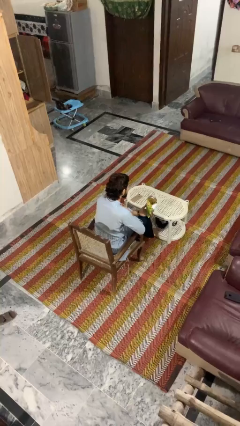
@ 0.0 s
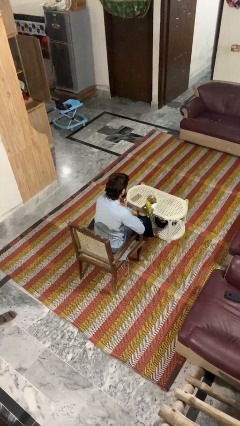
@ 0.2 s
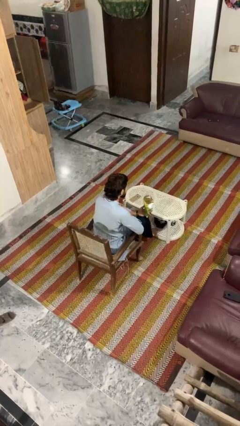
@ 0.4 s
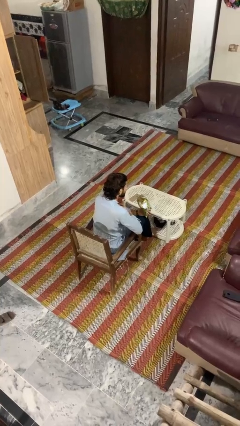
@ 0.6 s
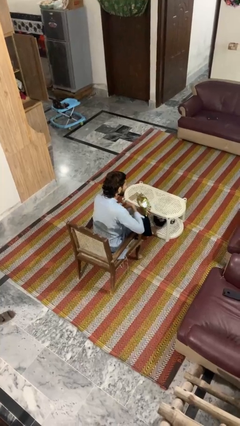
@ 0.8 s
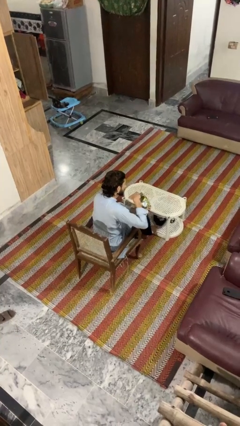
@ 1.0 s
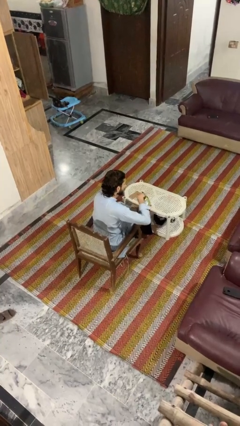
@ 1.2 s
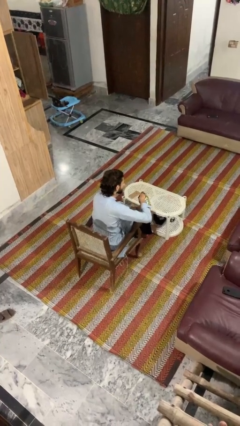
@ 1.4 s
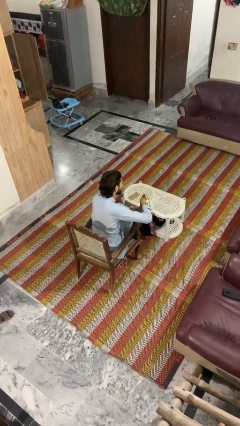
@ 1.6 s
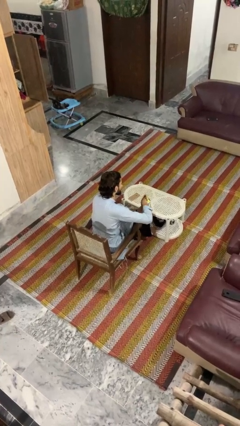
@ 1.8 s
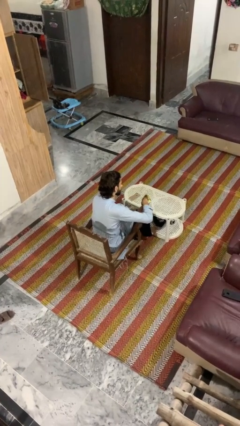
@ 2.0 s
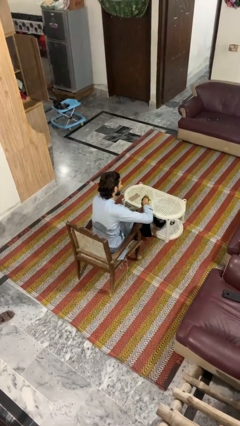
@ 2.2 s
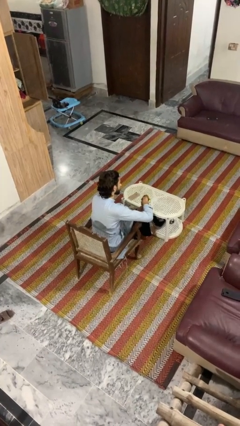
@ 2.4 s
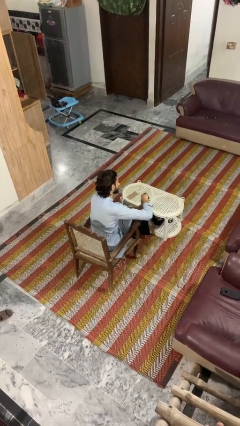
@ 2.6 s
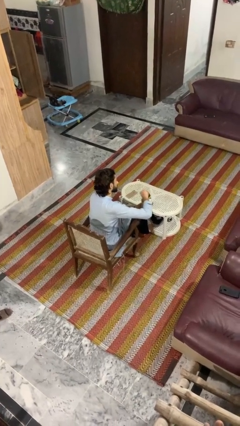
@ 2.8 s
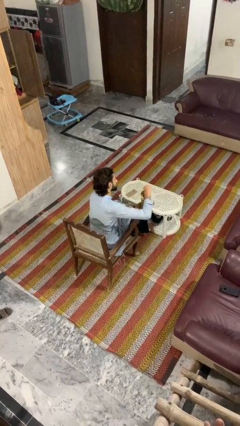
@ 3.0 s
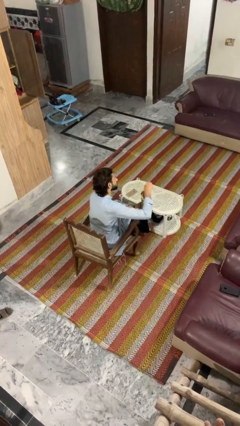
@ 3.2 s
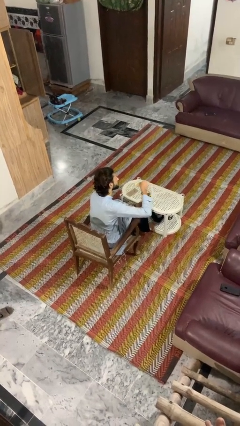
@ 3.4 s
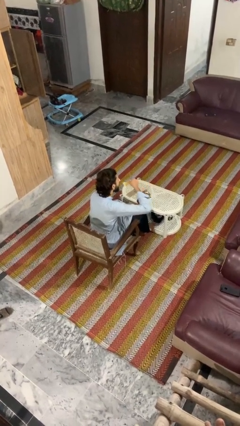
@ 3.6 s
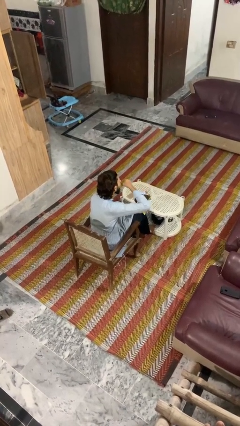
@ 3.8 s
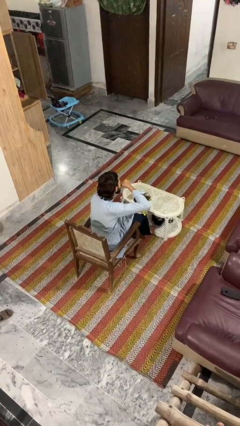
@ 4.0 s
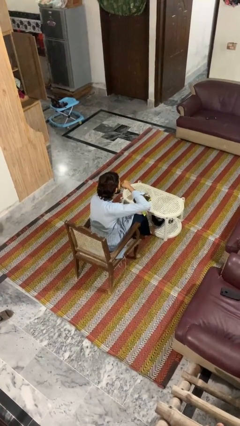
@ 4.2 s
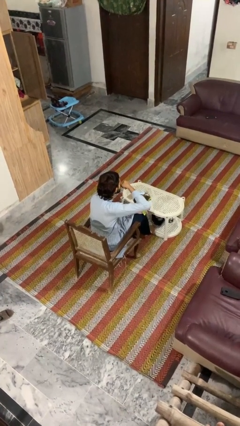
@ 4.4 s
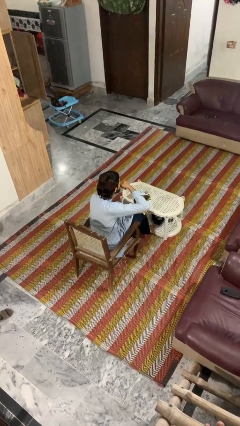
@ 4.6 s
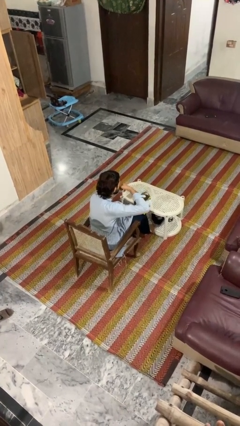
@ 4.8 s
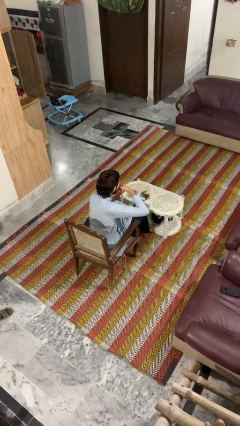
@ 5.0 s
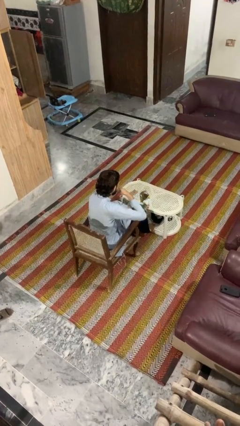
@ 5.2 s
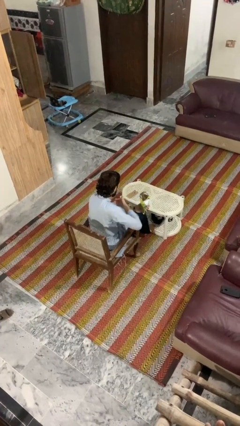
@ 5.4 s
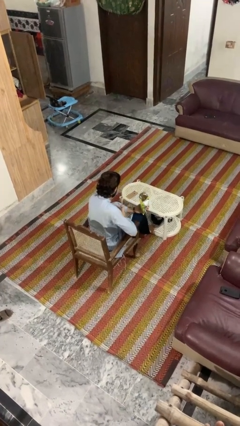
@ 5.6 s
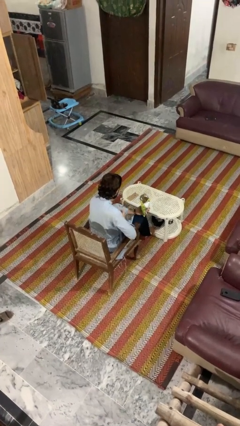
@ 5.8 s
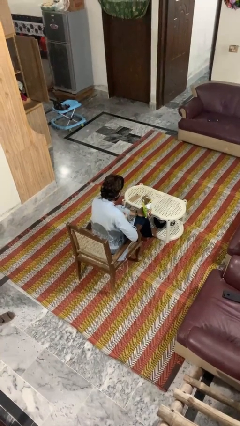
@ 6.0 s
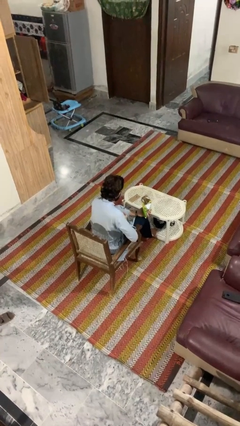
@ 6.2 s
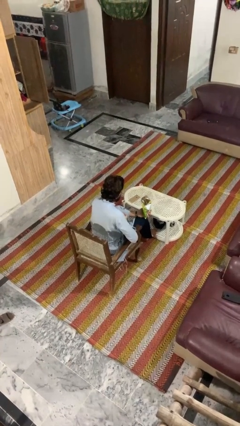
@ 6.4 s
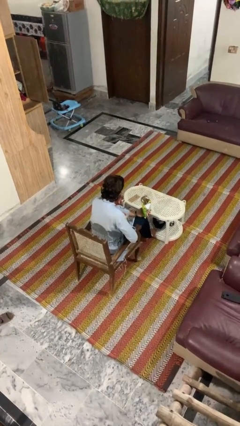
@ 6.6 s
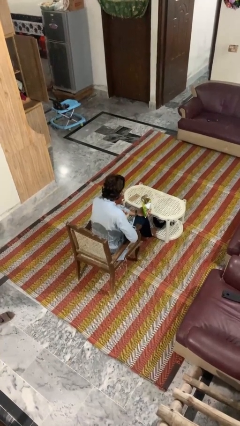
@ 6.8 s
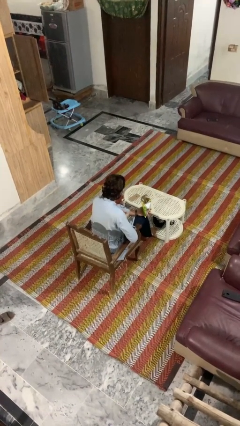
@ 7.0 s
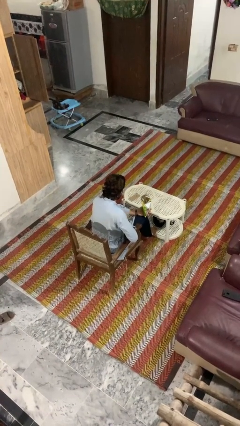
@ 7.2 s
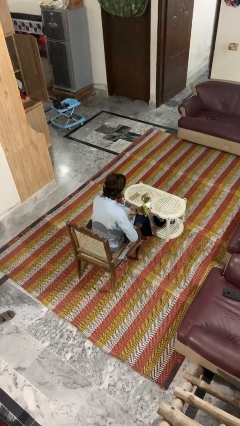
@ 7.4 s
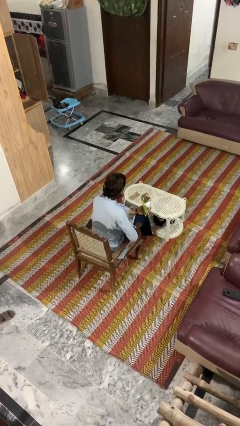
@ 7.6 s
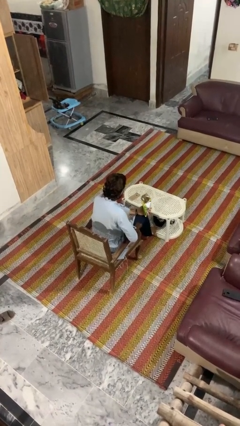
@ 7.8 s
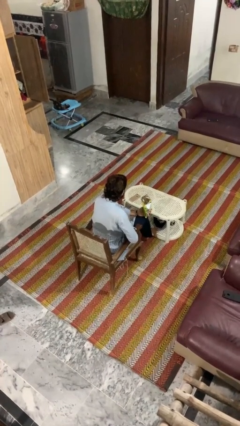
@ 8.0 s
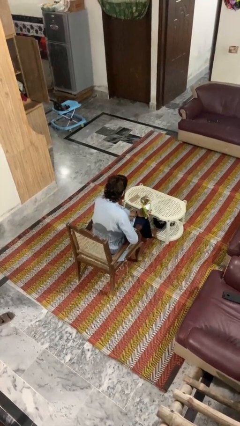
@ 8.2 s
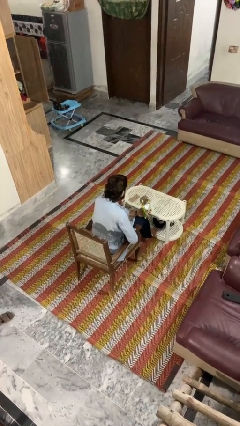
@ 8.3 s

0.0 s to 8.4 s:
person eats snack from bag

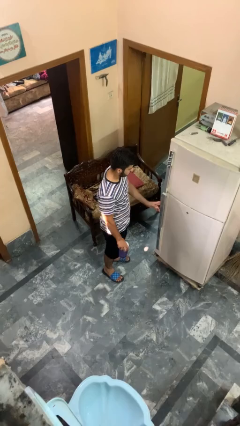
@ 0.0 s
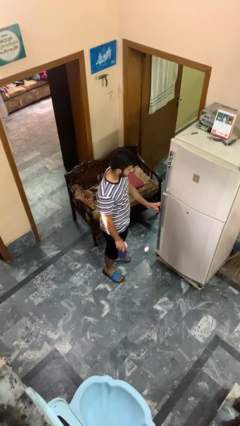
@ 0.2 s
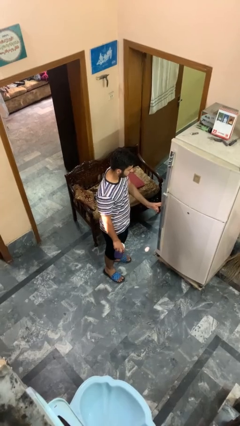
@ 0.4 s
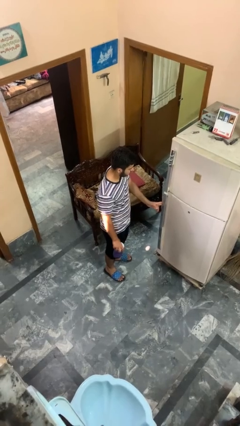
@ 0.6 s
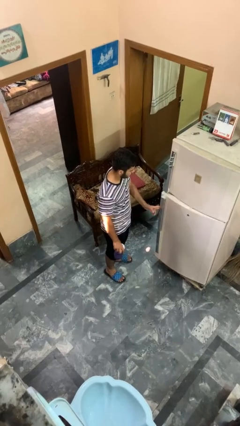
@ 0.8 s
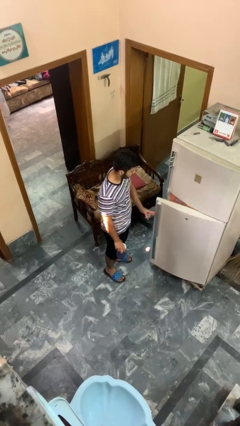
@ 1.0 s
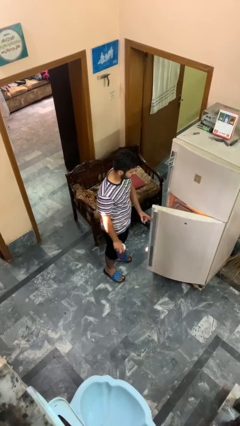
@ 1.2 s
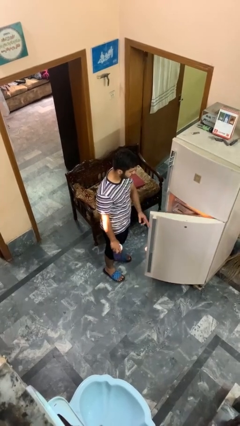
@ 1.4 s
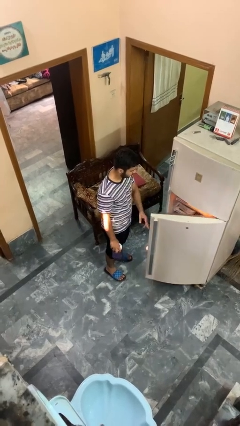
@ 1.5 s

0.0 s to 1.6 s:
person opens refrigerator

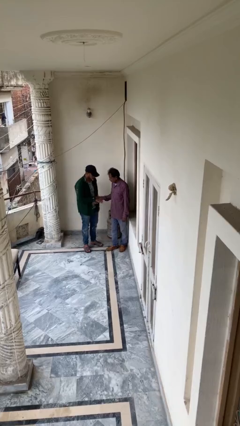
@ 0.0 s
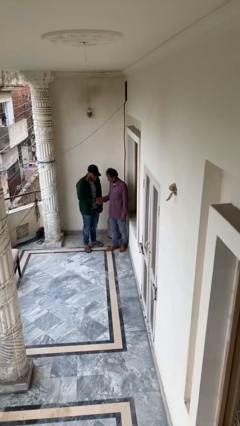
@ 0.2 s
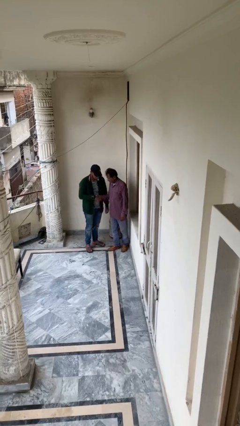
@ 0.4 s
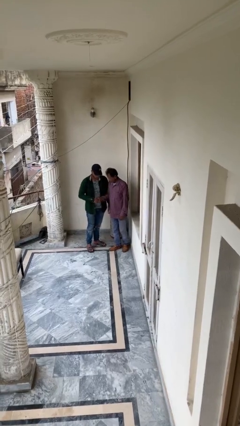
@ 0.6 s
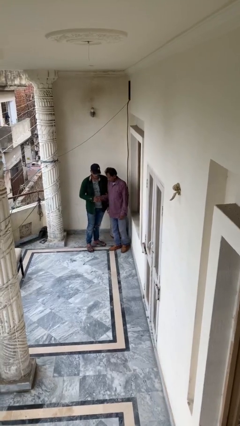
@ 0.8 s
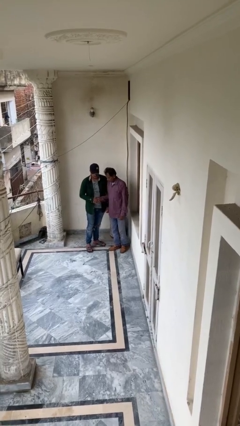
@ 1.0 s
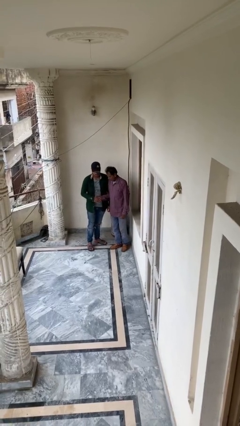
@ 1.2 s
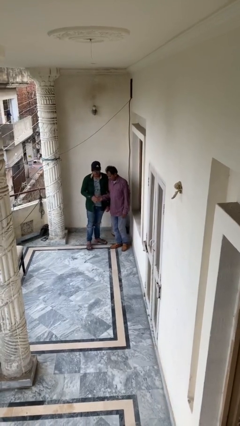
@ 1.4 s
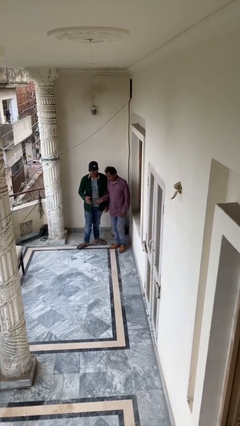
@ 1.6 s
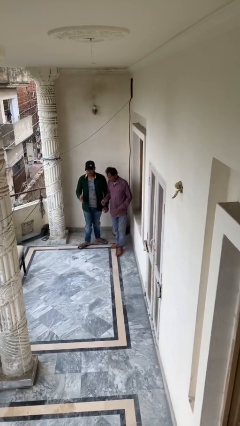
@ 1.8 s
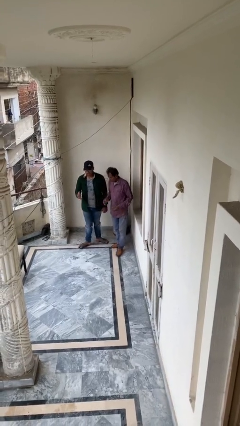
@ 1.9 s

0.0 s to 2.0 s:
person shakes hand

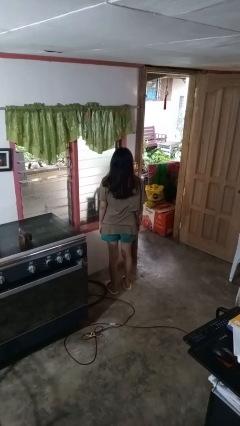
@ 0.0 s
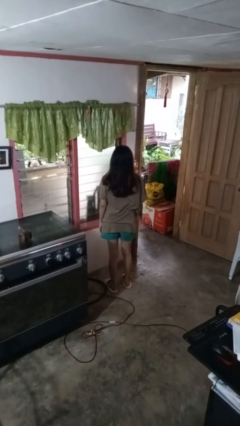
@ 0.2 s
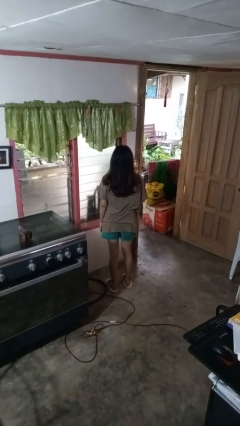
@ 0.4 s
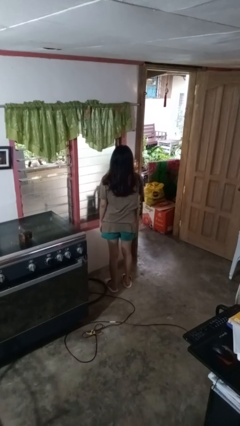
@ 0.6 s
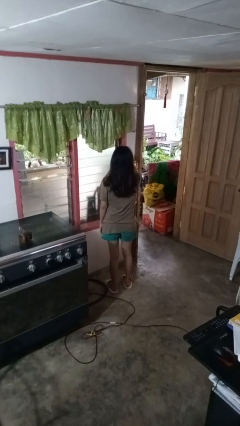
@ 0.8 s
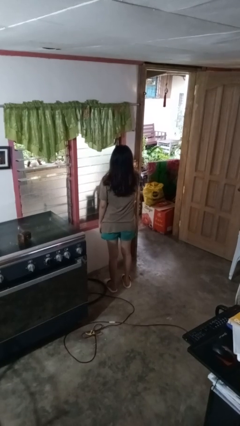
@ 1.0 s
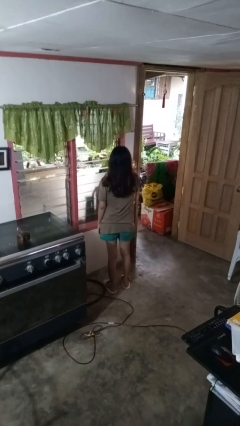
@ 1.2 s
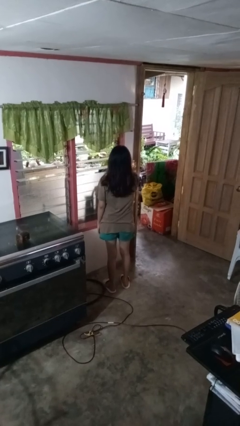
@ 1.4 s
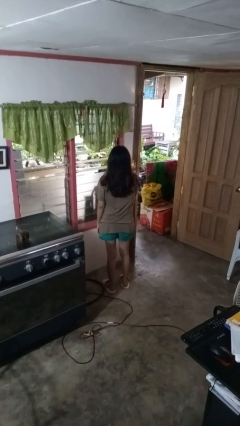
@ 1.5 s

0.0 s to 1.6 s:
person opens home window

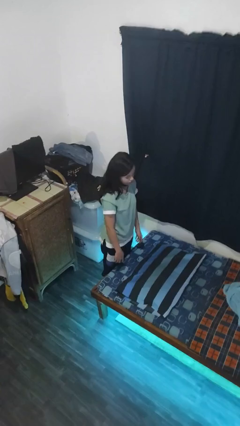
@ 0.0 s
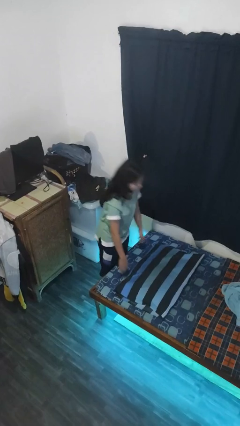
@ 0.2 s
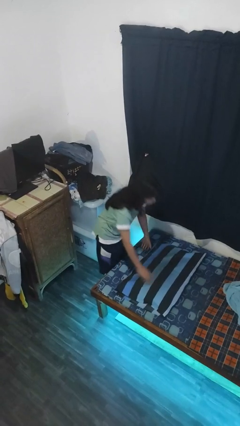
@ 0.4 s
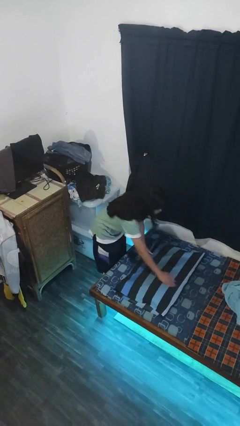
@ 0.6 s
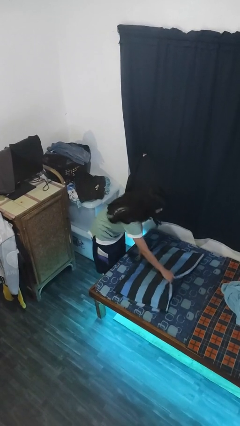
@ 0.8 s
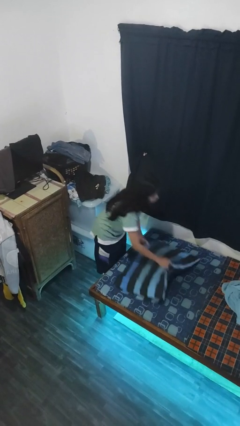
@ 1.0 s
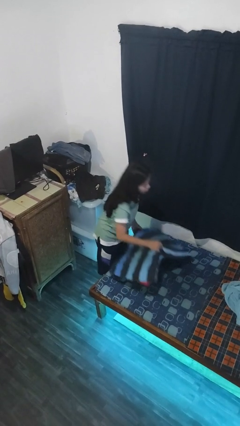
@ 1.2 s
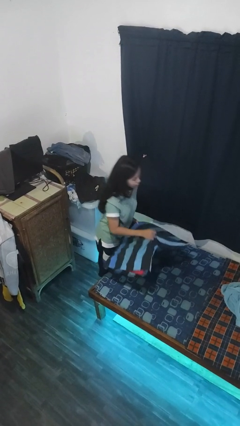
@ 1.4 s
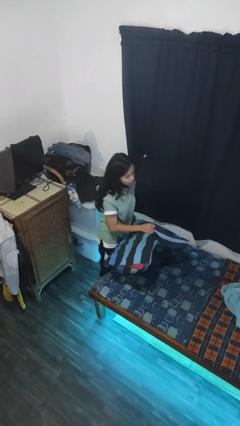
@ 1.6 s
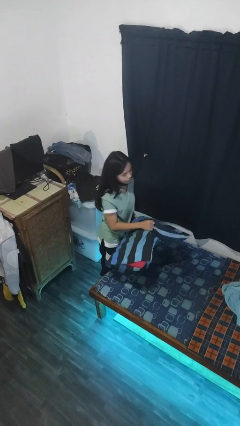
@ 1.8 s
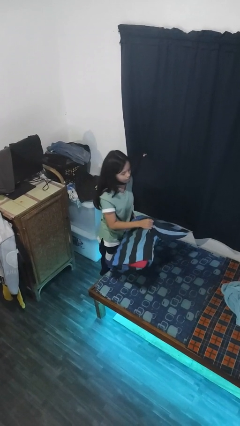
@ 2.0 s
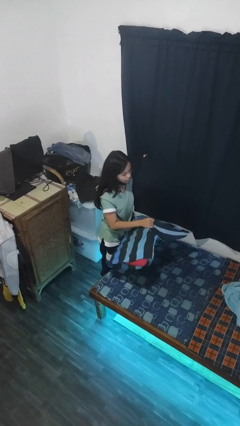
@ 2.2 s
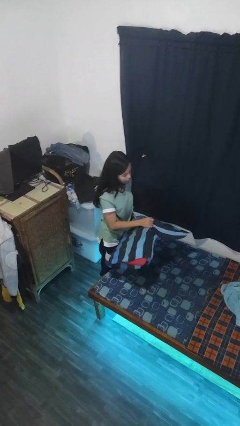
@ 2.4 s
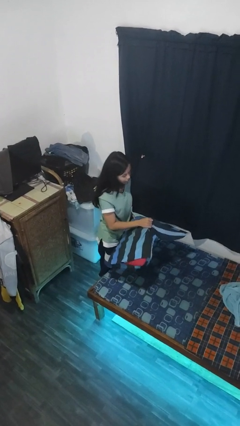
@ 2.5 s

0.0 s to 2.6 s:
person picks up object from bed

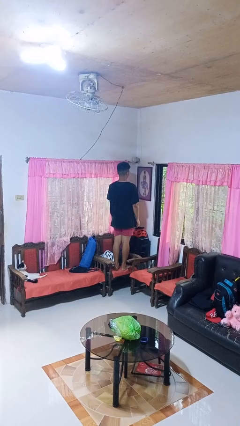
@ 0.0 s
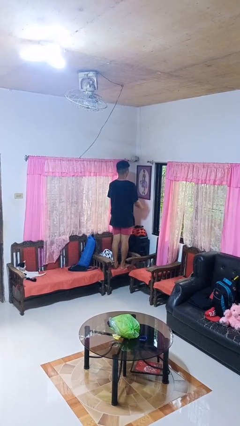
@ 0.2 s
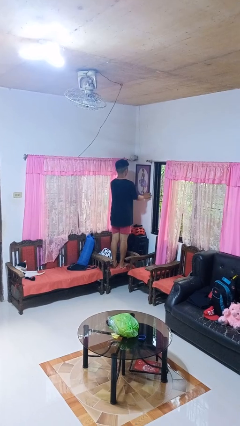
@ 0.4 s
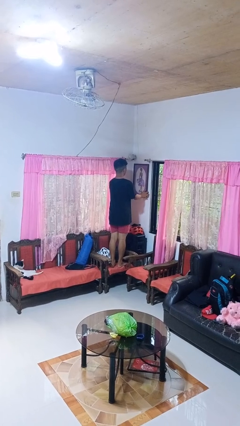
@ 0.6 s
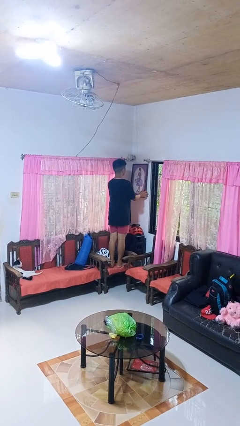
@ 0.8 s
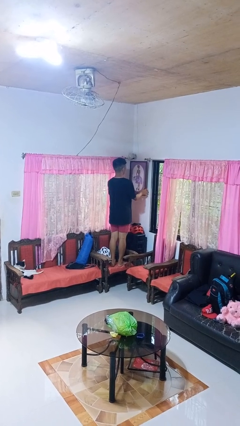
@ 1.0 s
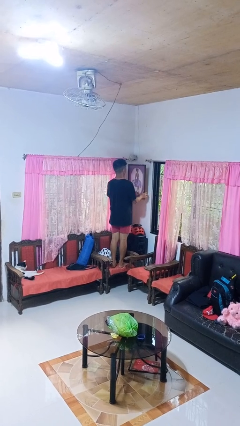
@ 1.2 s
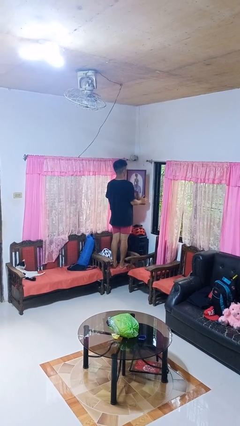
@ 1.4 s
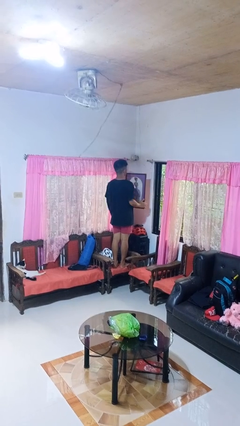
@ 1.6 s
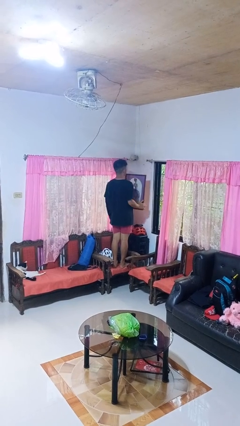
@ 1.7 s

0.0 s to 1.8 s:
person takes down picture frame
